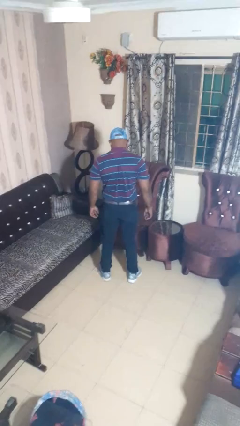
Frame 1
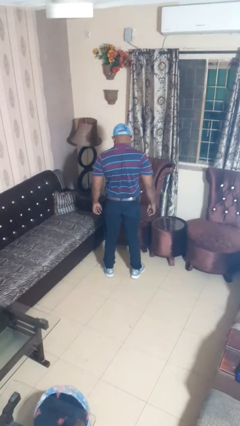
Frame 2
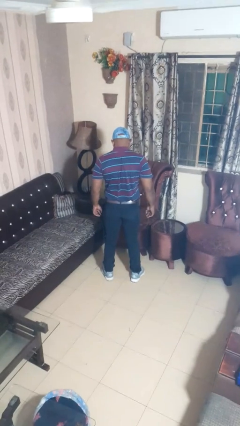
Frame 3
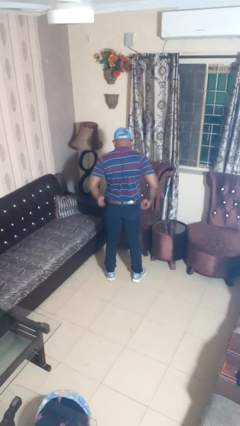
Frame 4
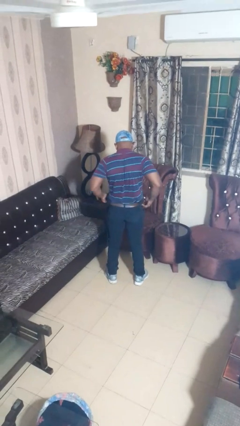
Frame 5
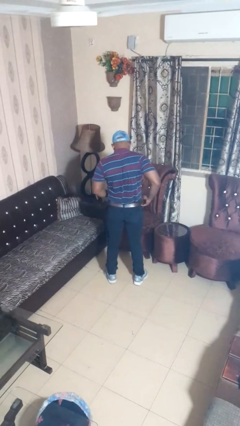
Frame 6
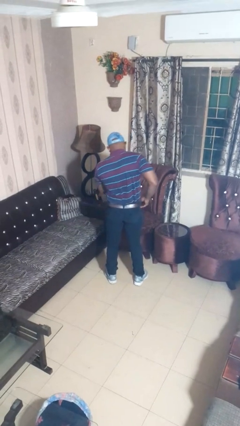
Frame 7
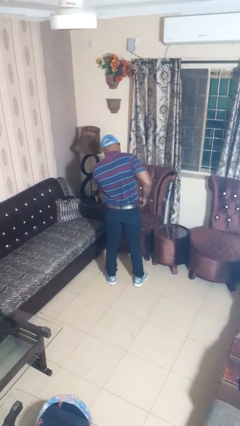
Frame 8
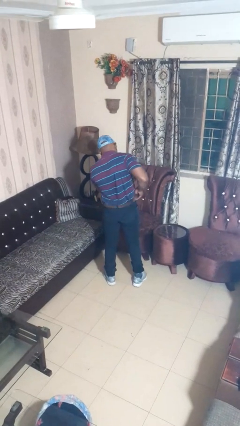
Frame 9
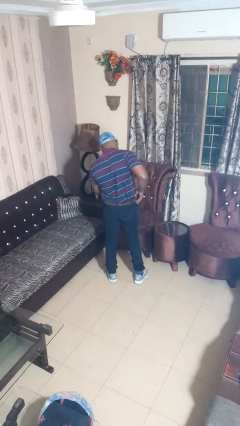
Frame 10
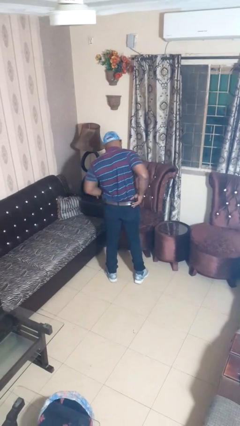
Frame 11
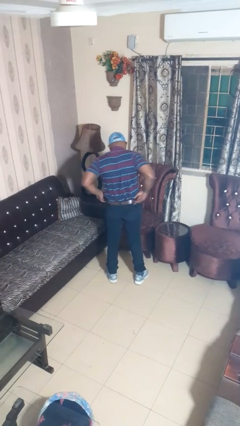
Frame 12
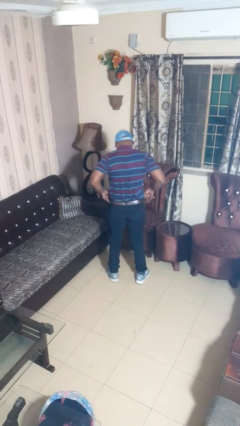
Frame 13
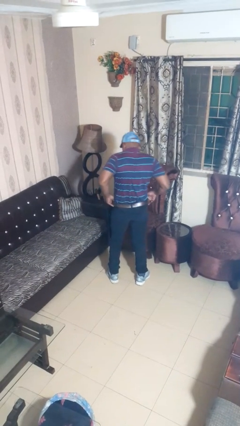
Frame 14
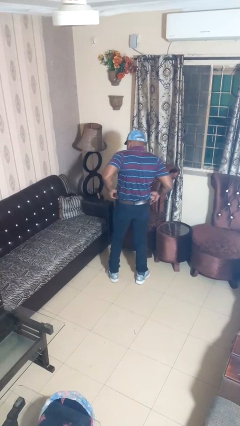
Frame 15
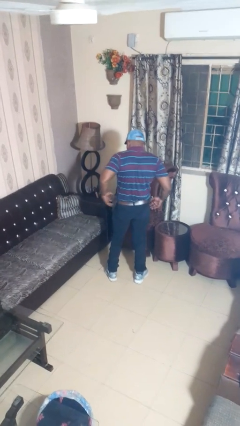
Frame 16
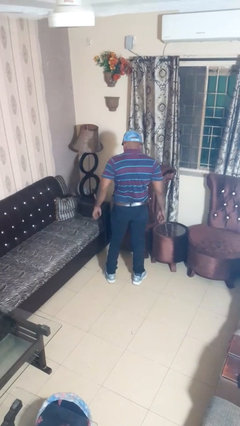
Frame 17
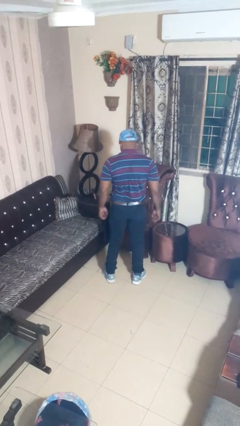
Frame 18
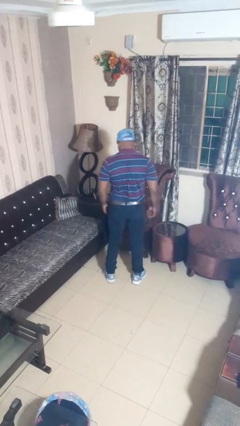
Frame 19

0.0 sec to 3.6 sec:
person hikes up pants

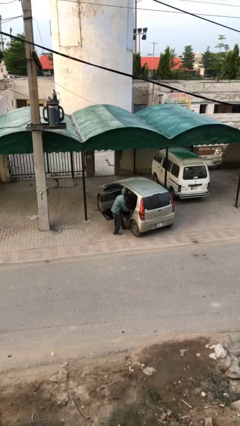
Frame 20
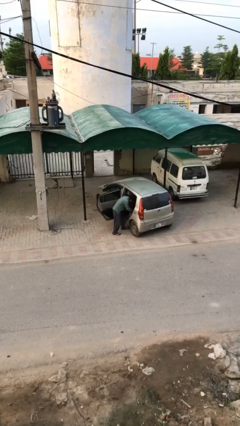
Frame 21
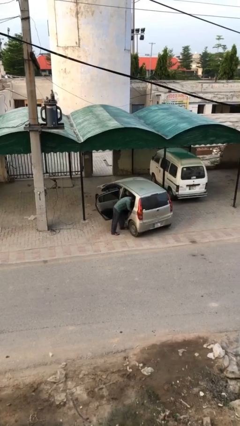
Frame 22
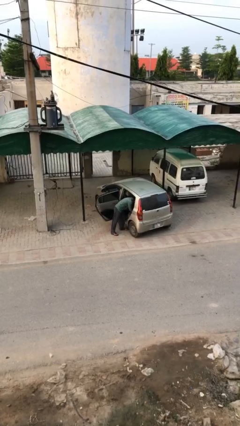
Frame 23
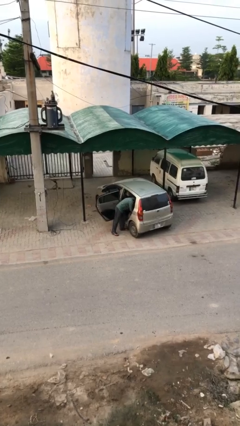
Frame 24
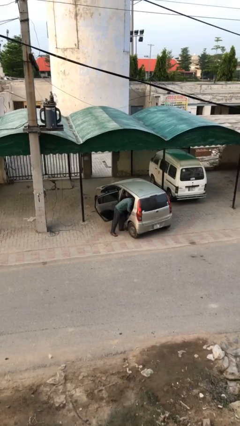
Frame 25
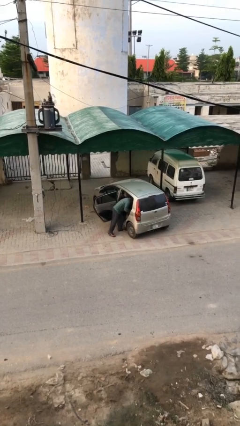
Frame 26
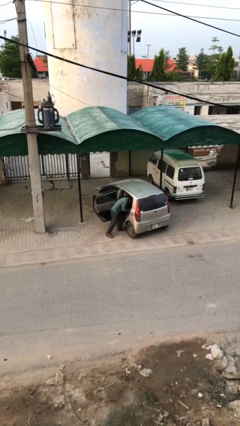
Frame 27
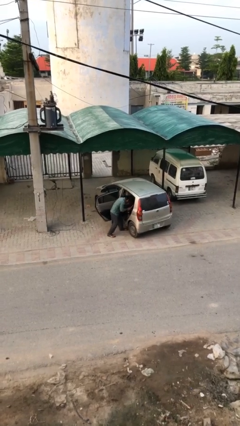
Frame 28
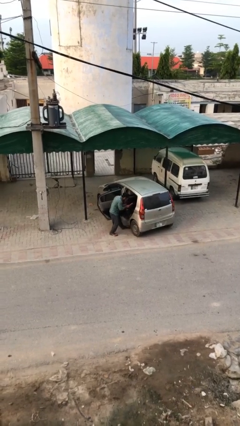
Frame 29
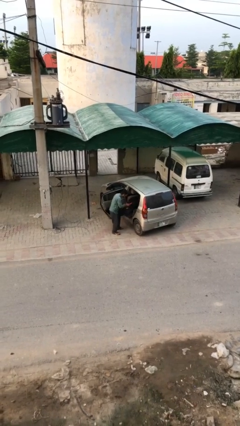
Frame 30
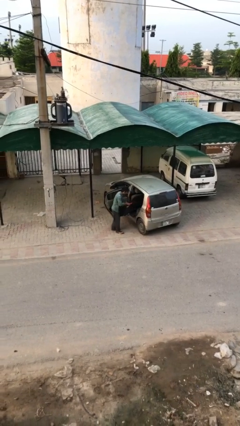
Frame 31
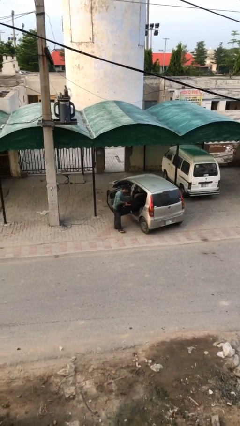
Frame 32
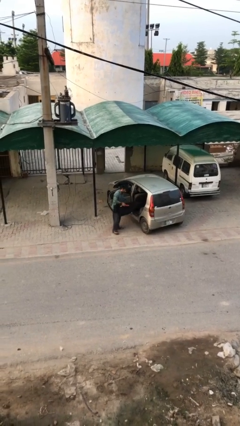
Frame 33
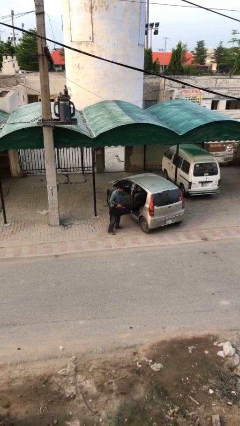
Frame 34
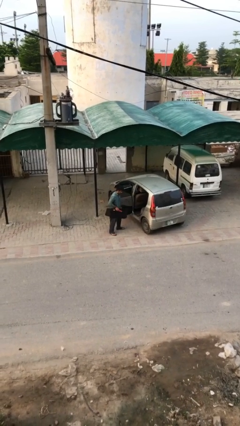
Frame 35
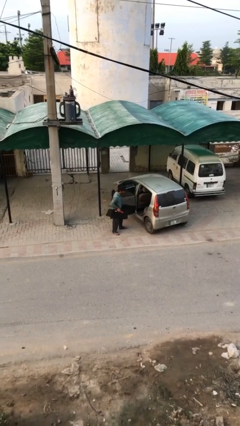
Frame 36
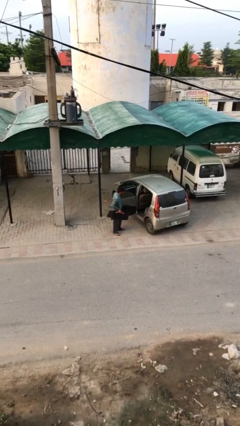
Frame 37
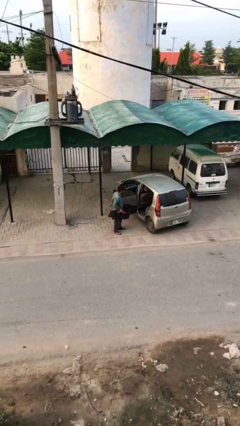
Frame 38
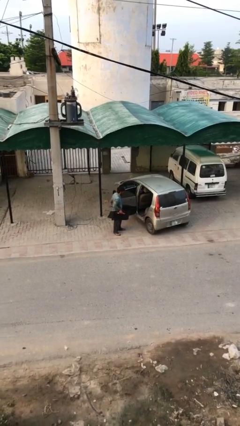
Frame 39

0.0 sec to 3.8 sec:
person unloads car

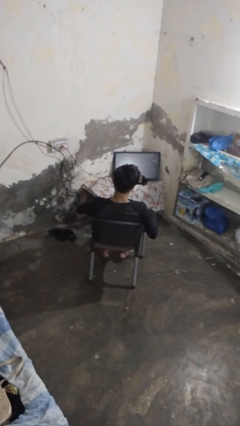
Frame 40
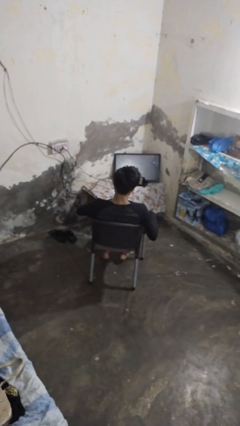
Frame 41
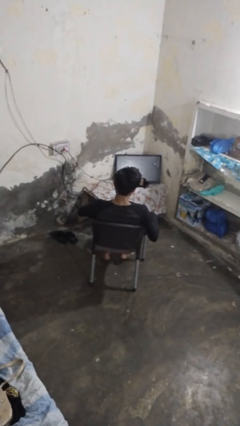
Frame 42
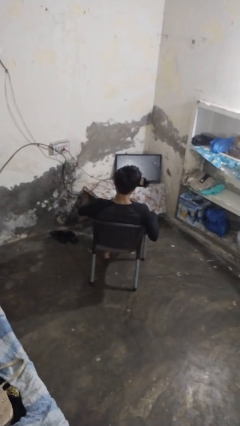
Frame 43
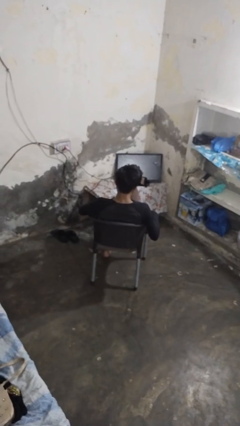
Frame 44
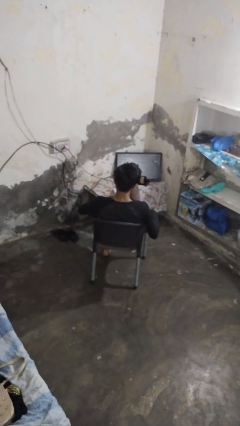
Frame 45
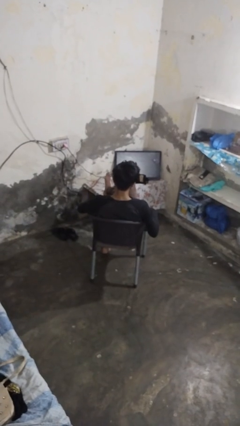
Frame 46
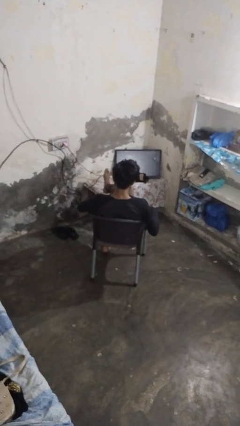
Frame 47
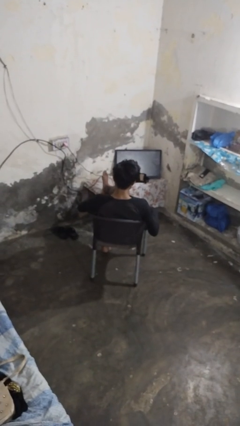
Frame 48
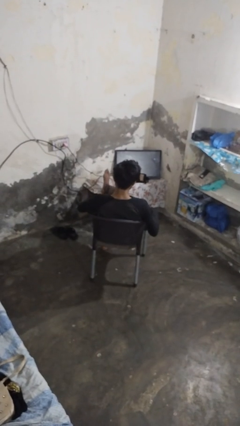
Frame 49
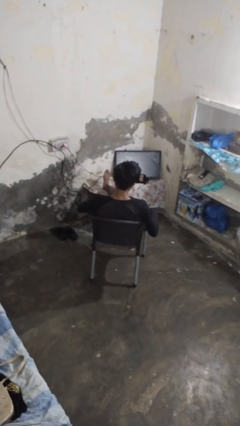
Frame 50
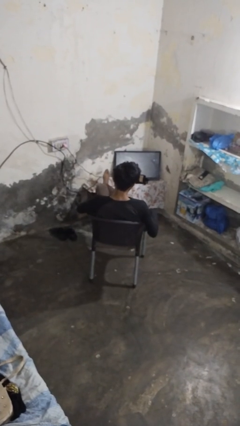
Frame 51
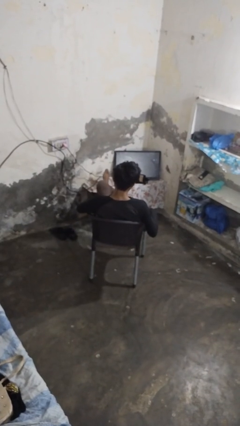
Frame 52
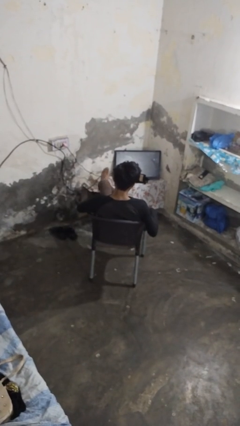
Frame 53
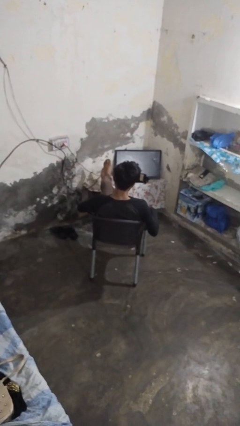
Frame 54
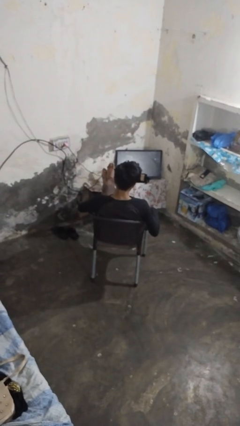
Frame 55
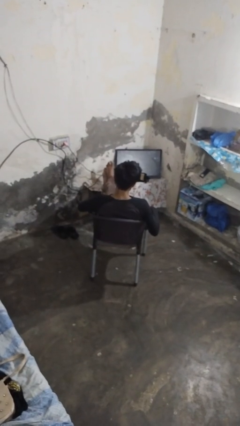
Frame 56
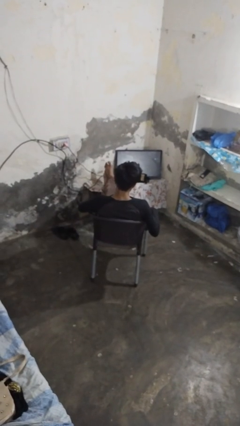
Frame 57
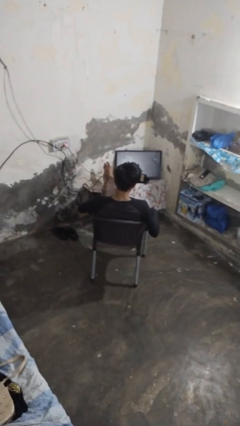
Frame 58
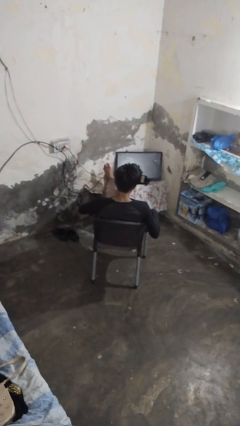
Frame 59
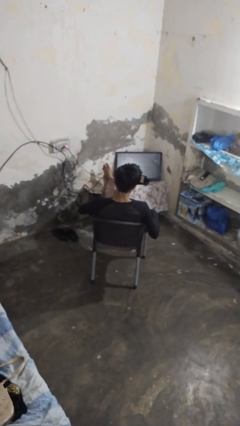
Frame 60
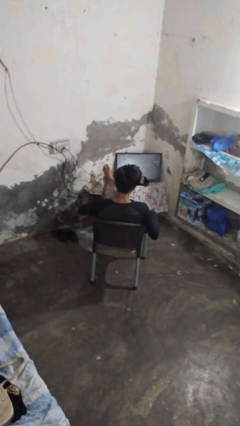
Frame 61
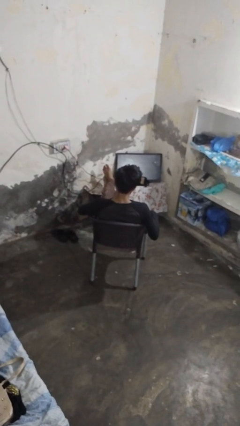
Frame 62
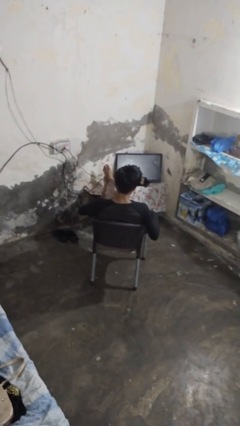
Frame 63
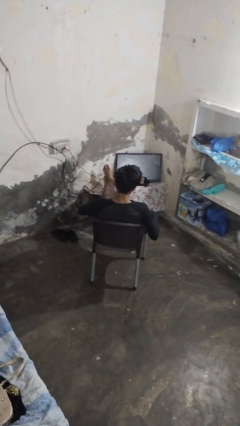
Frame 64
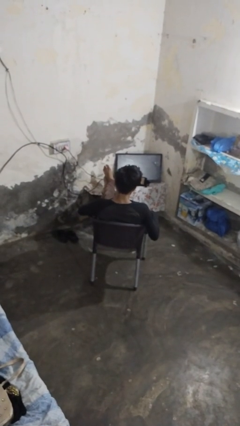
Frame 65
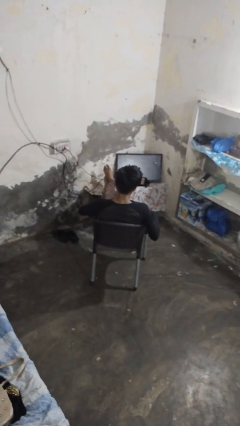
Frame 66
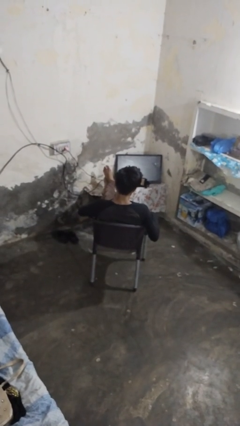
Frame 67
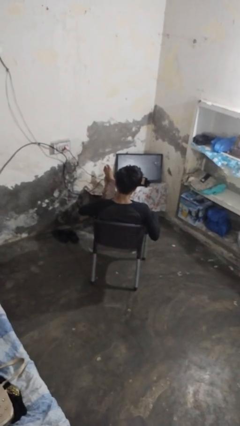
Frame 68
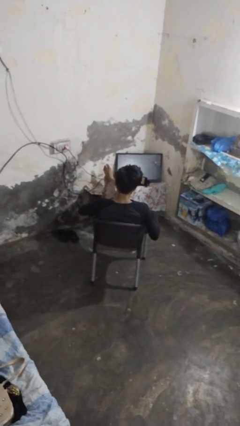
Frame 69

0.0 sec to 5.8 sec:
person puts feet up

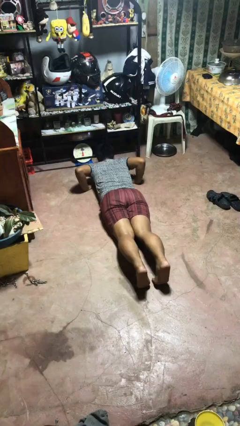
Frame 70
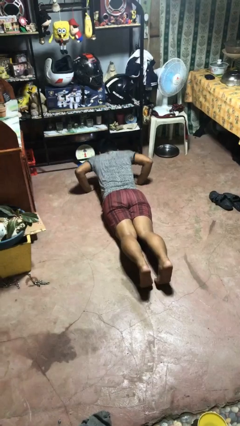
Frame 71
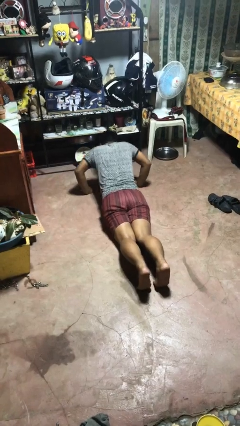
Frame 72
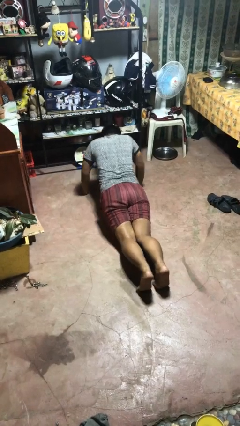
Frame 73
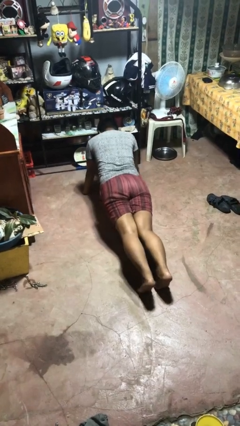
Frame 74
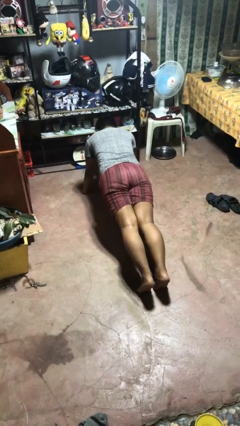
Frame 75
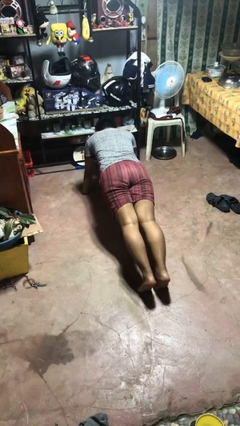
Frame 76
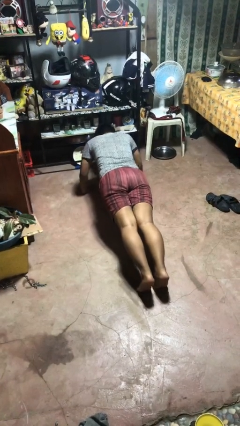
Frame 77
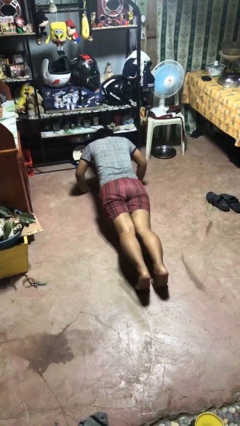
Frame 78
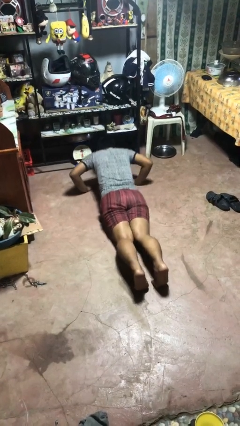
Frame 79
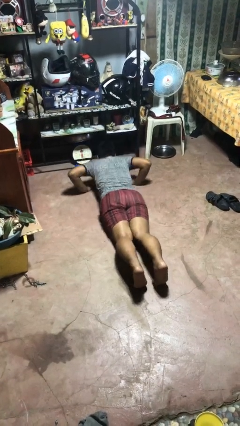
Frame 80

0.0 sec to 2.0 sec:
person exercises with pushup

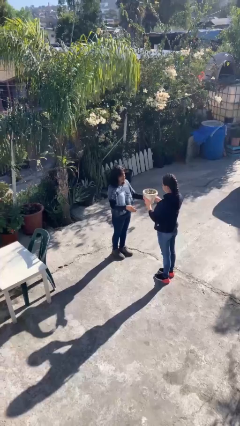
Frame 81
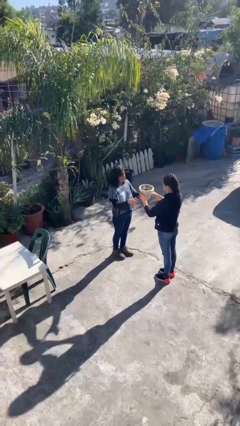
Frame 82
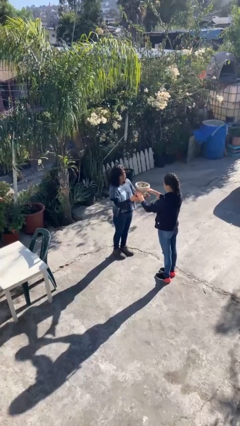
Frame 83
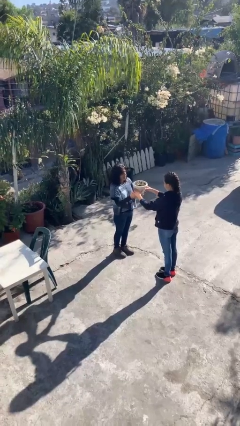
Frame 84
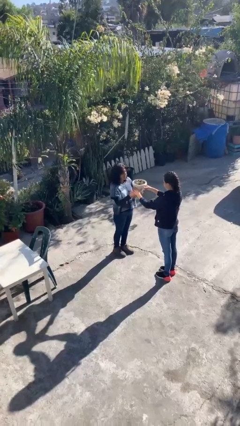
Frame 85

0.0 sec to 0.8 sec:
person transfers object to person

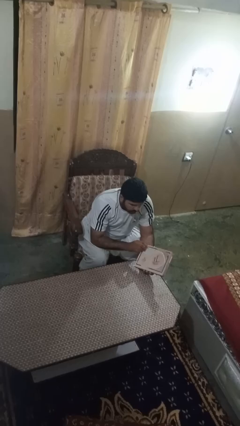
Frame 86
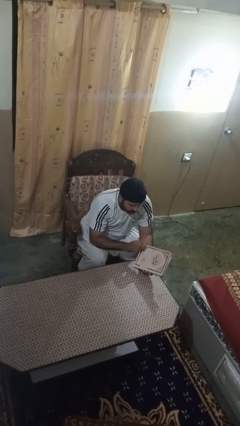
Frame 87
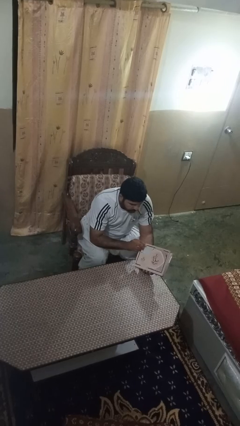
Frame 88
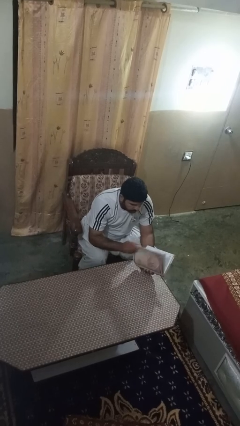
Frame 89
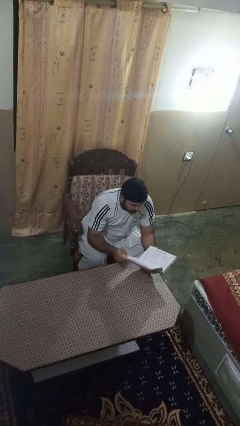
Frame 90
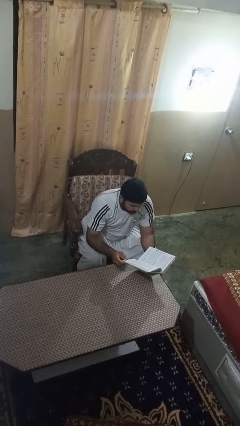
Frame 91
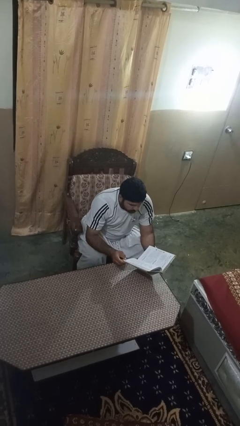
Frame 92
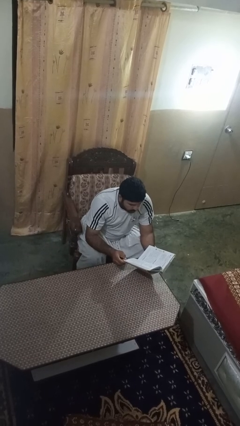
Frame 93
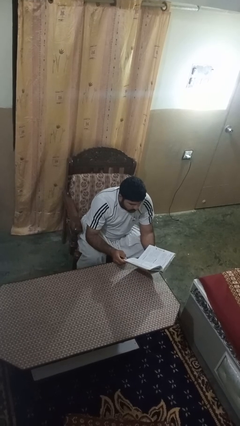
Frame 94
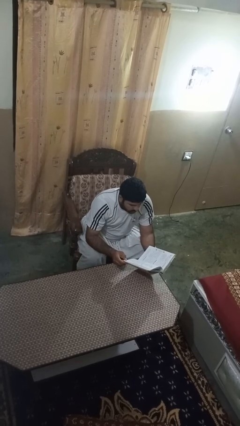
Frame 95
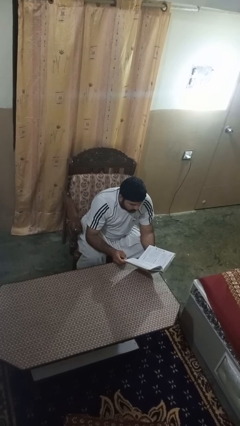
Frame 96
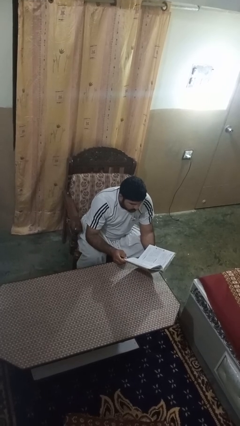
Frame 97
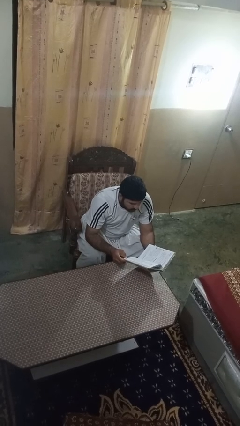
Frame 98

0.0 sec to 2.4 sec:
person reads book
